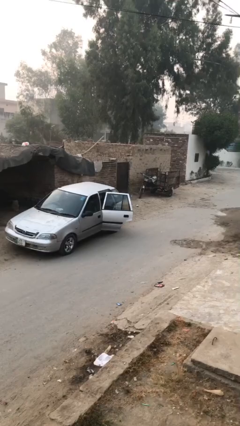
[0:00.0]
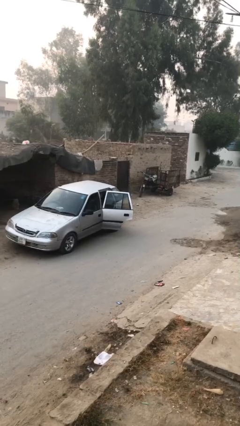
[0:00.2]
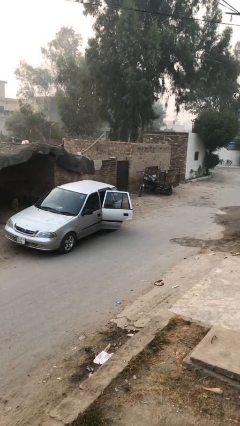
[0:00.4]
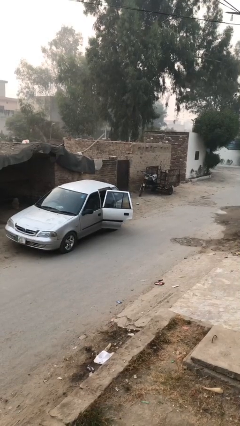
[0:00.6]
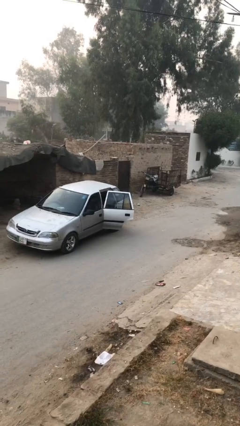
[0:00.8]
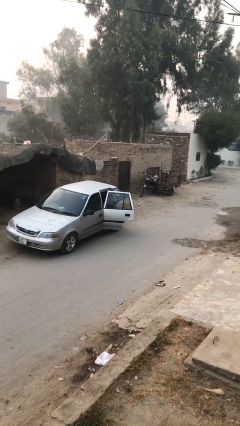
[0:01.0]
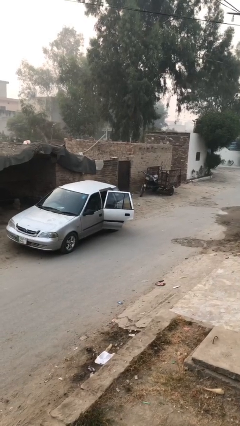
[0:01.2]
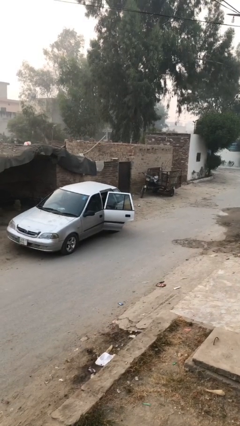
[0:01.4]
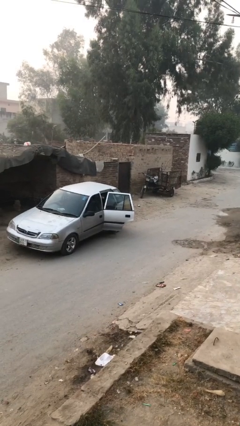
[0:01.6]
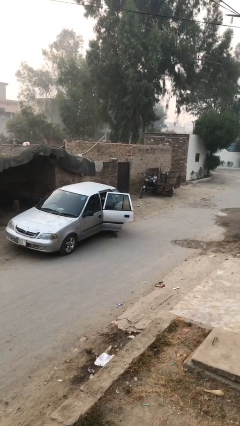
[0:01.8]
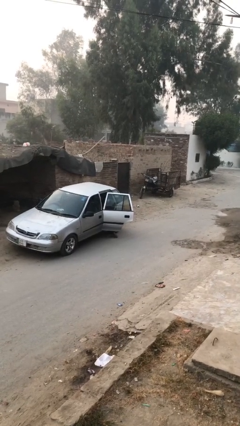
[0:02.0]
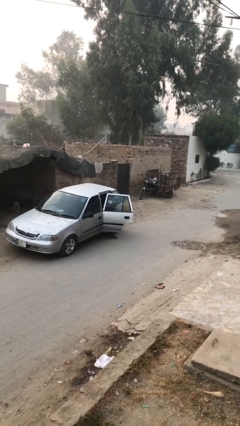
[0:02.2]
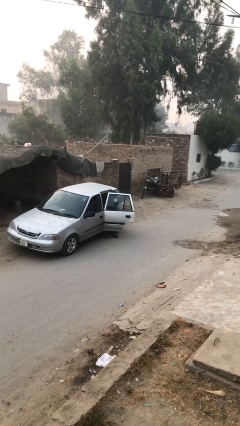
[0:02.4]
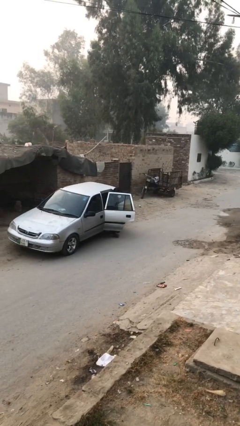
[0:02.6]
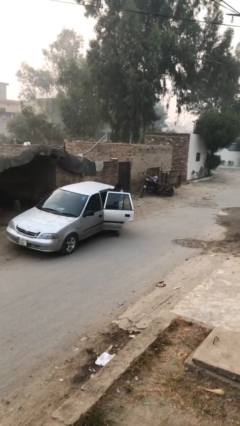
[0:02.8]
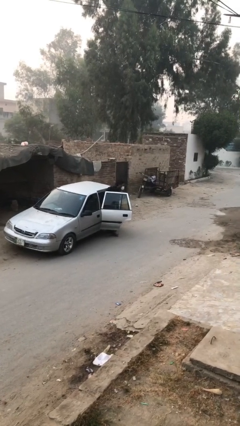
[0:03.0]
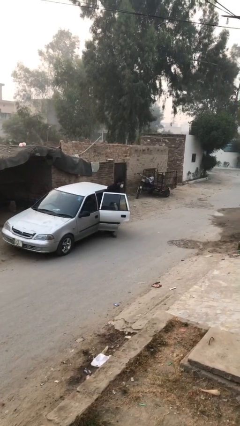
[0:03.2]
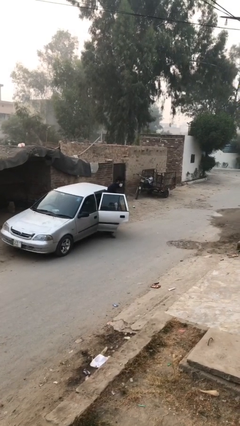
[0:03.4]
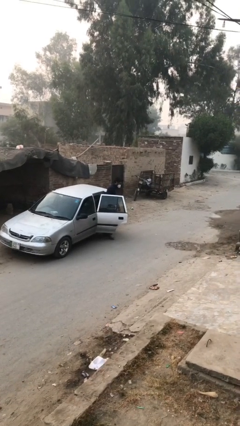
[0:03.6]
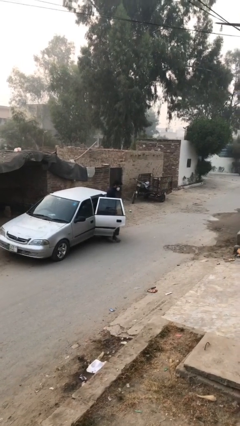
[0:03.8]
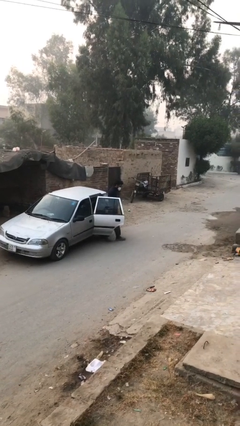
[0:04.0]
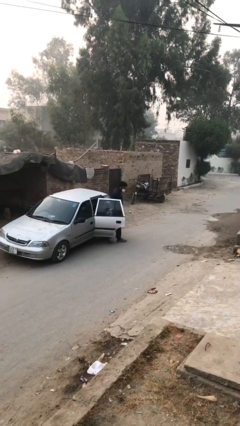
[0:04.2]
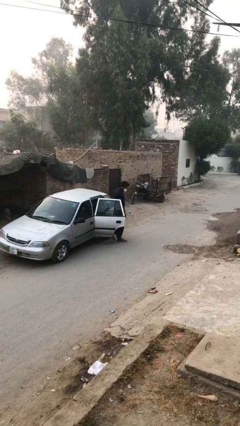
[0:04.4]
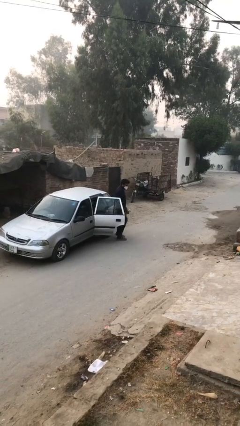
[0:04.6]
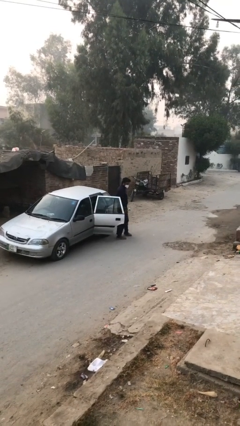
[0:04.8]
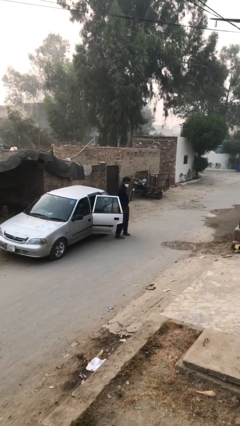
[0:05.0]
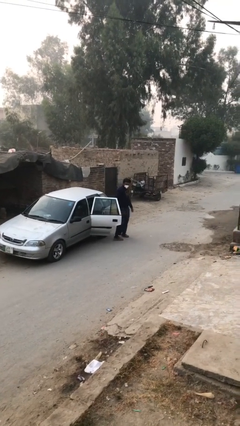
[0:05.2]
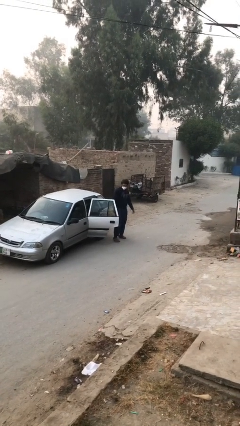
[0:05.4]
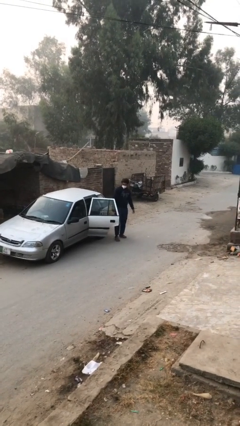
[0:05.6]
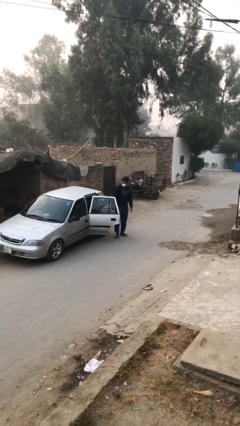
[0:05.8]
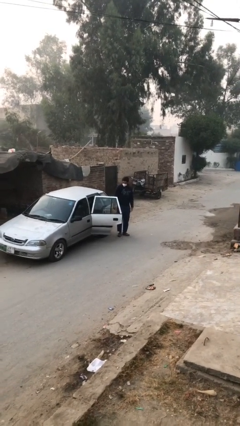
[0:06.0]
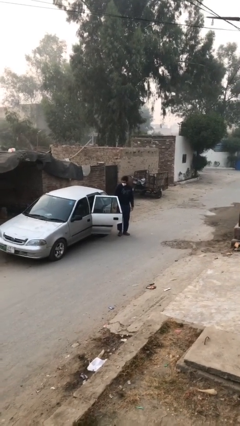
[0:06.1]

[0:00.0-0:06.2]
person exits car

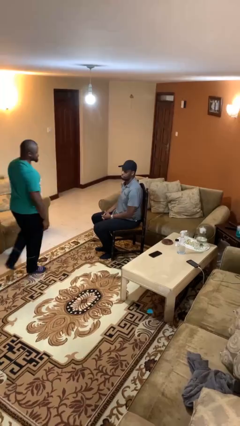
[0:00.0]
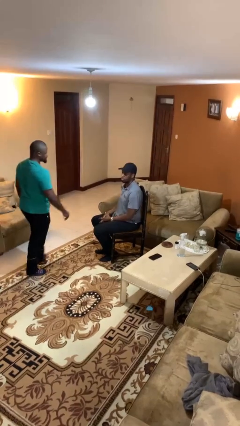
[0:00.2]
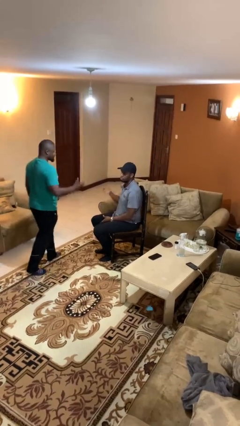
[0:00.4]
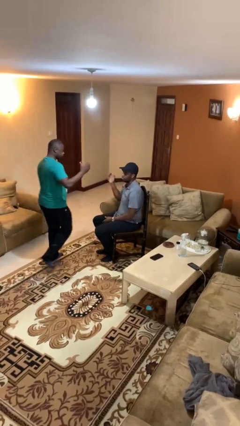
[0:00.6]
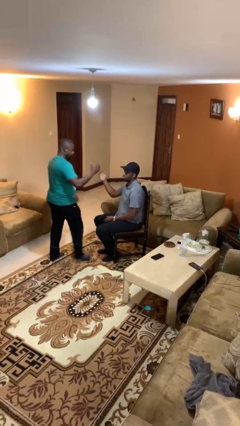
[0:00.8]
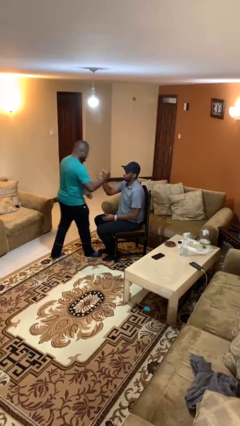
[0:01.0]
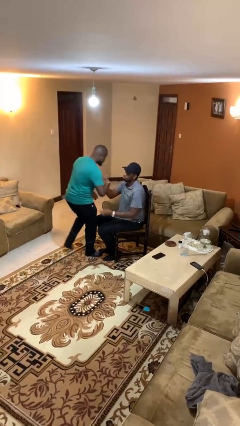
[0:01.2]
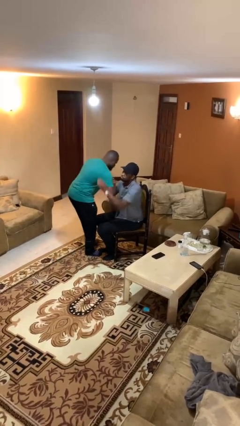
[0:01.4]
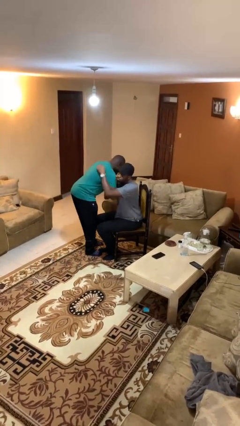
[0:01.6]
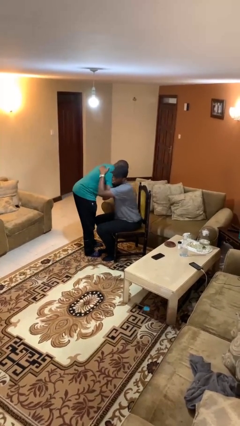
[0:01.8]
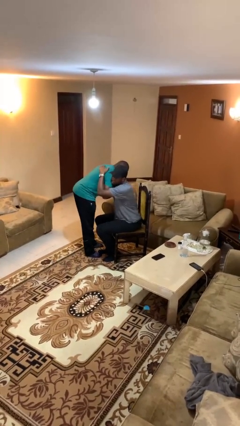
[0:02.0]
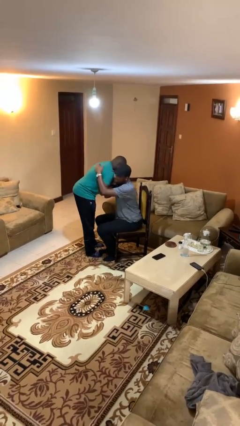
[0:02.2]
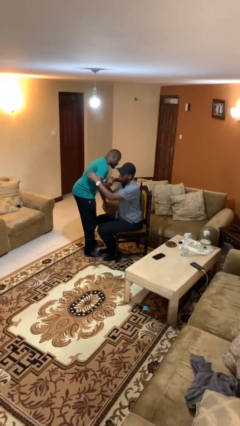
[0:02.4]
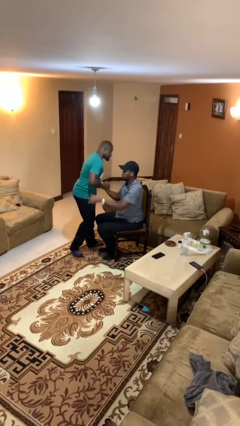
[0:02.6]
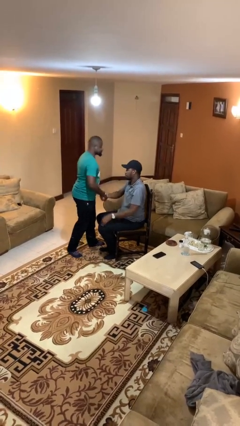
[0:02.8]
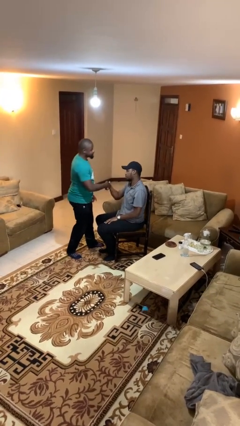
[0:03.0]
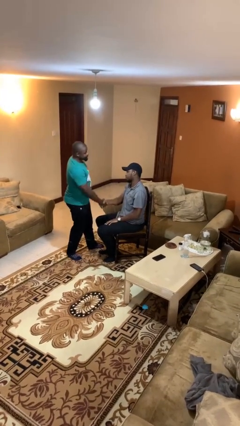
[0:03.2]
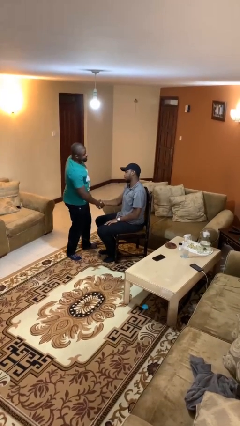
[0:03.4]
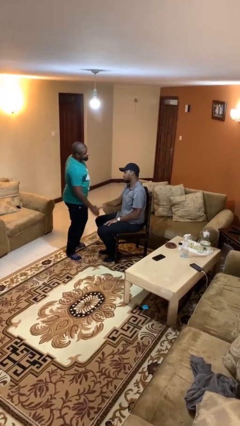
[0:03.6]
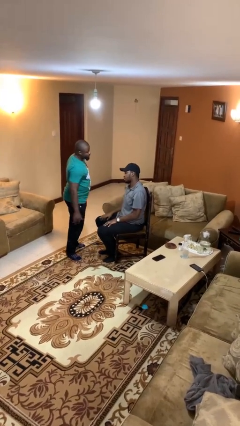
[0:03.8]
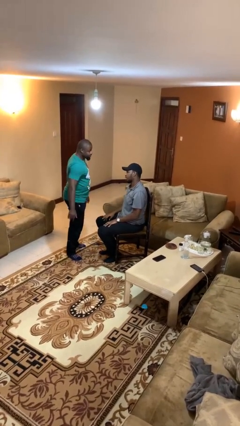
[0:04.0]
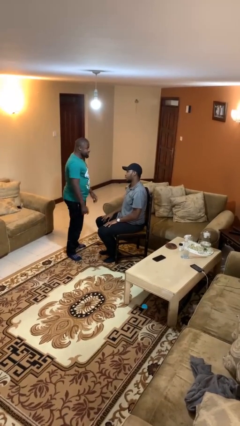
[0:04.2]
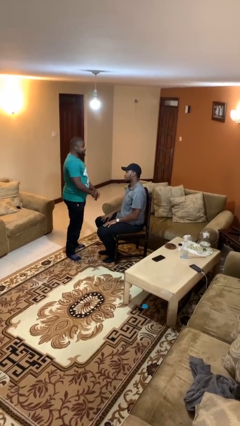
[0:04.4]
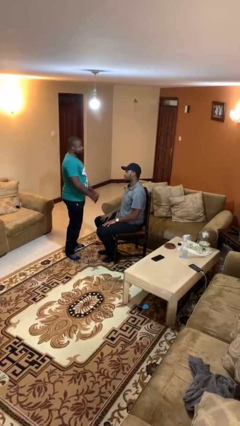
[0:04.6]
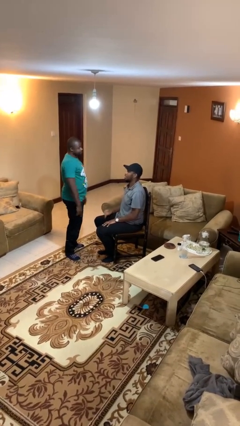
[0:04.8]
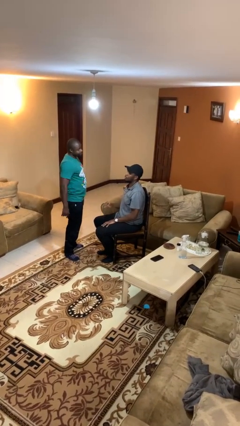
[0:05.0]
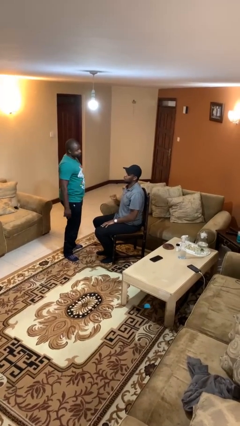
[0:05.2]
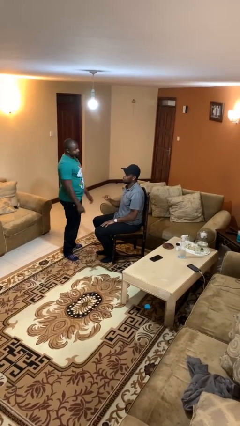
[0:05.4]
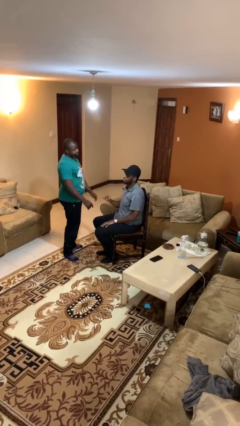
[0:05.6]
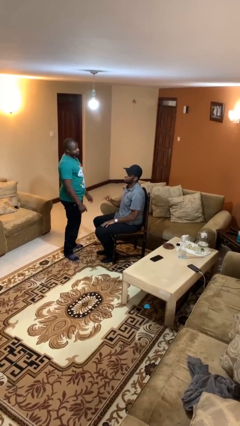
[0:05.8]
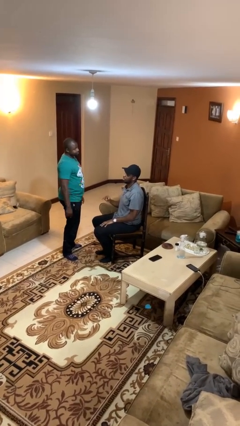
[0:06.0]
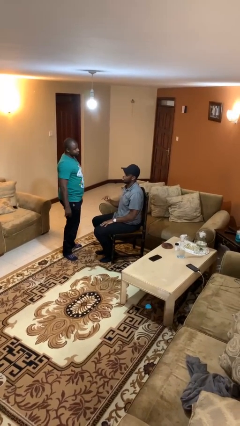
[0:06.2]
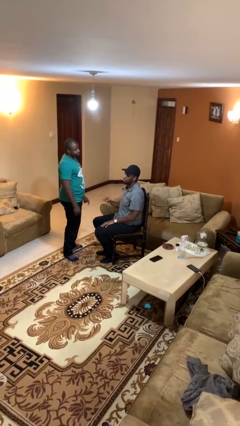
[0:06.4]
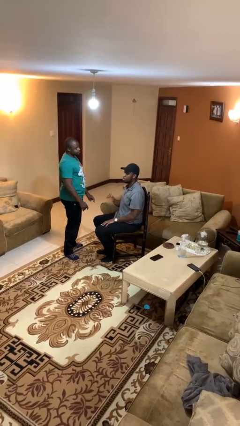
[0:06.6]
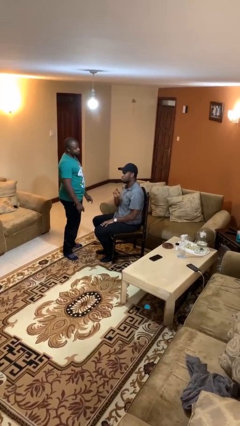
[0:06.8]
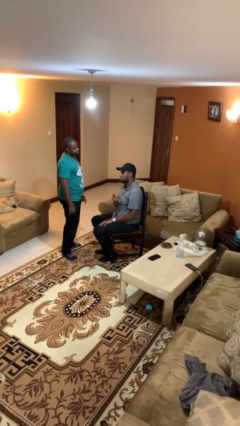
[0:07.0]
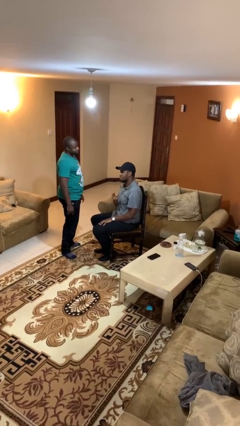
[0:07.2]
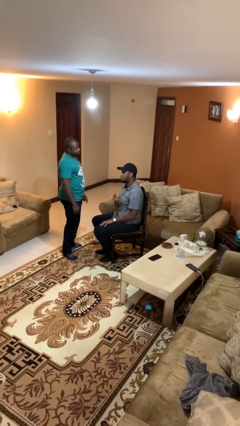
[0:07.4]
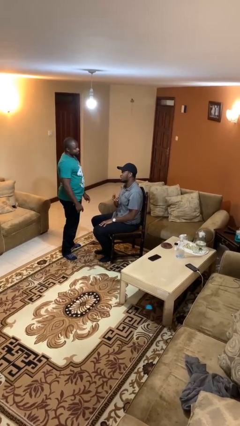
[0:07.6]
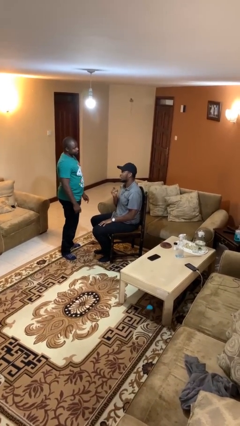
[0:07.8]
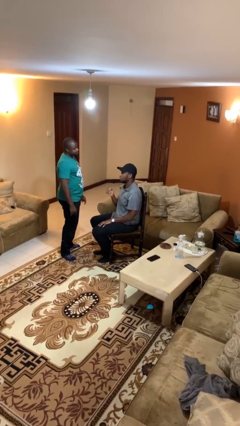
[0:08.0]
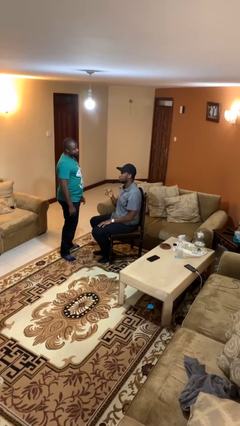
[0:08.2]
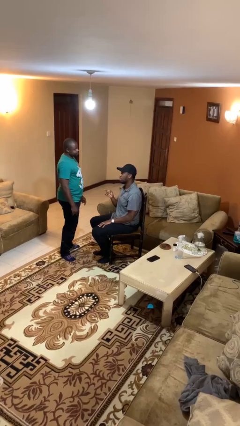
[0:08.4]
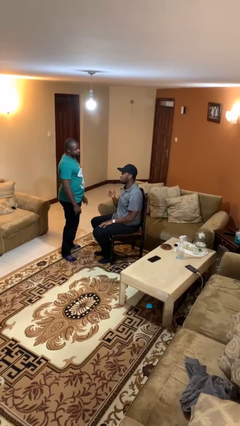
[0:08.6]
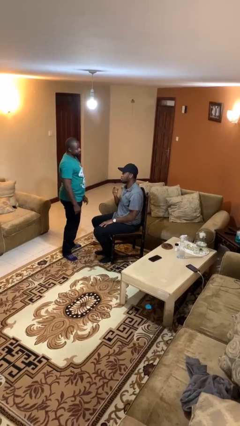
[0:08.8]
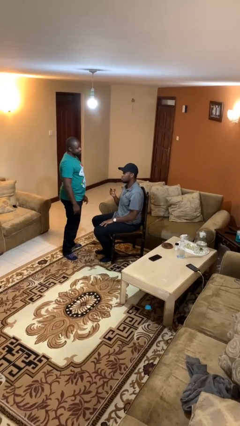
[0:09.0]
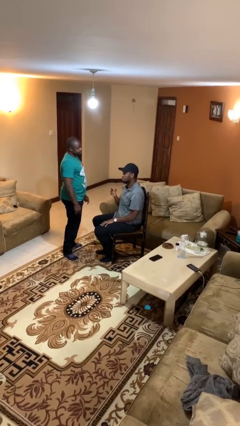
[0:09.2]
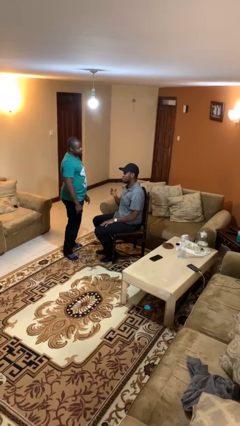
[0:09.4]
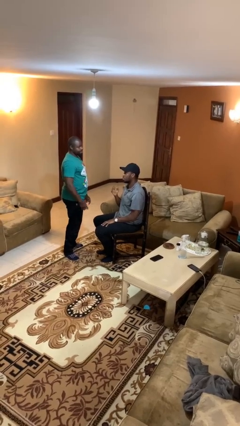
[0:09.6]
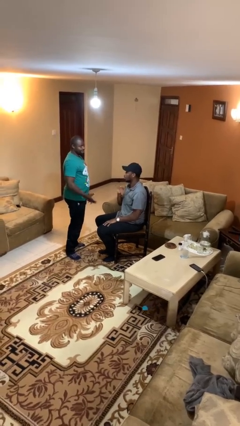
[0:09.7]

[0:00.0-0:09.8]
person embraces person

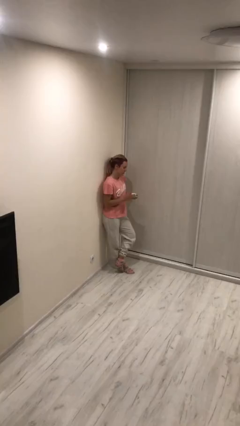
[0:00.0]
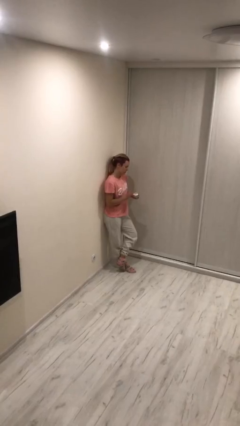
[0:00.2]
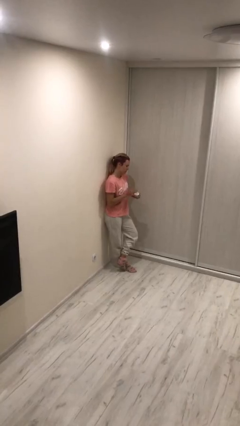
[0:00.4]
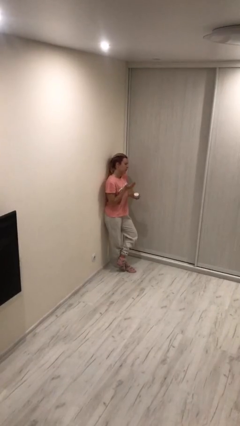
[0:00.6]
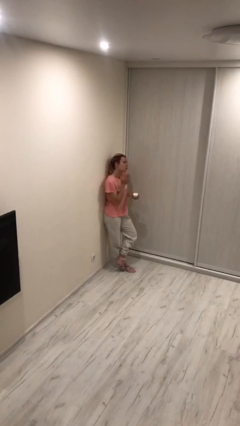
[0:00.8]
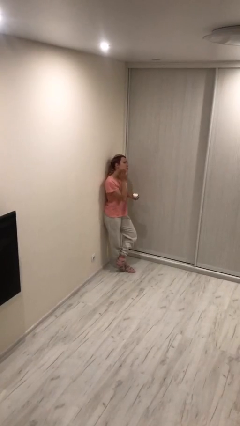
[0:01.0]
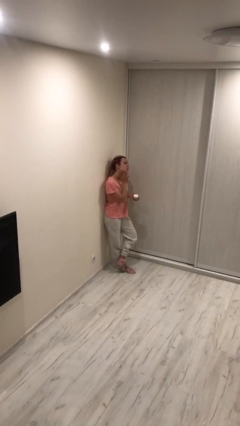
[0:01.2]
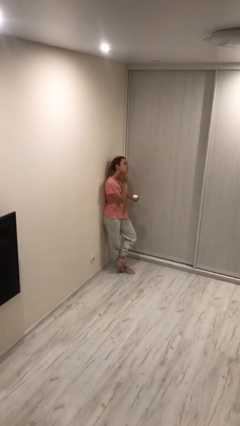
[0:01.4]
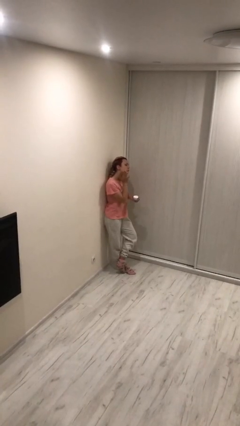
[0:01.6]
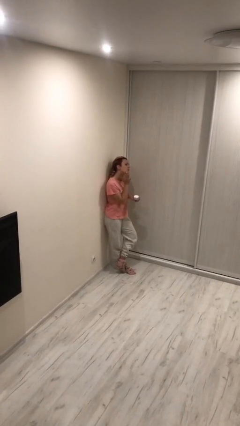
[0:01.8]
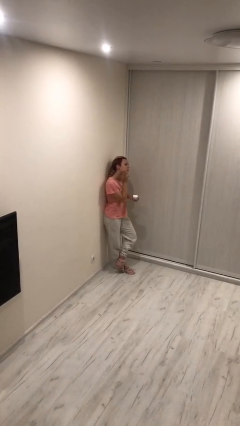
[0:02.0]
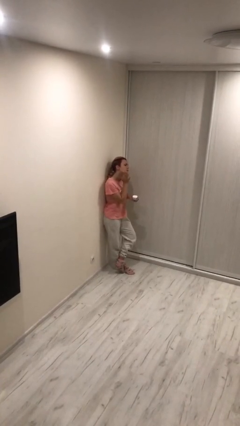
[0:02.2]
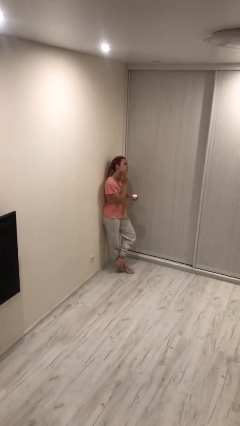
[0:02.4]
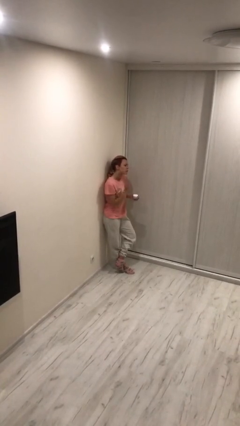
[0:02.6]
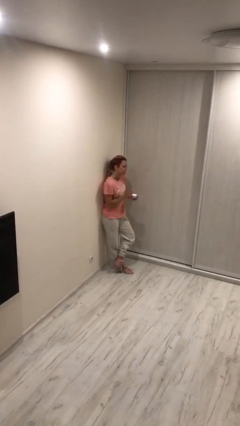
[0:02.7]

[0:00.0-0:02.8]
person applies facial moisturizer
